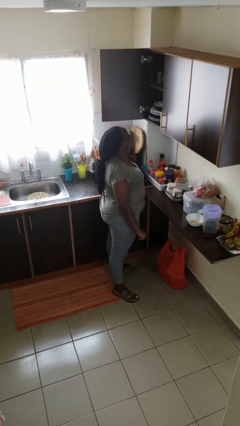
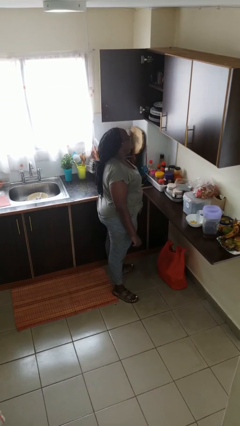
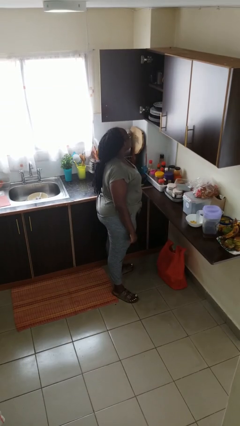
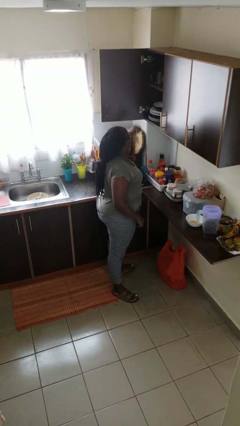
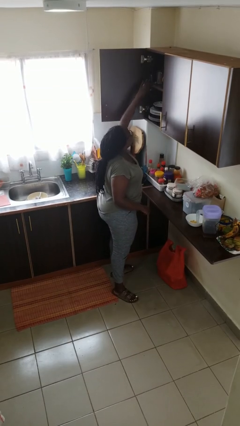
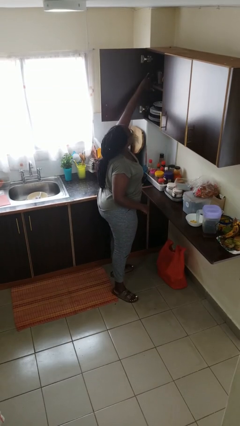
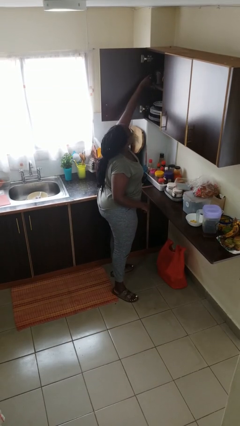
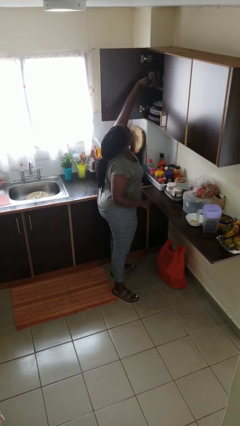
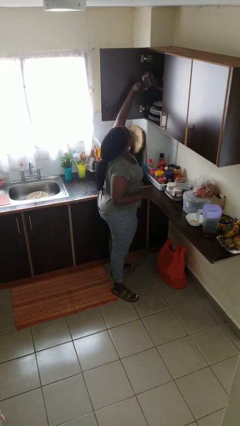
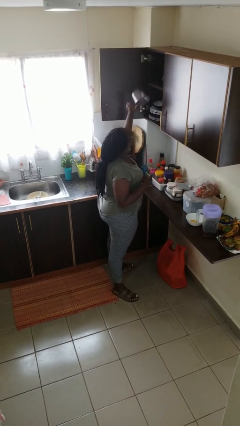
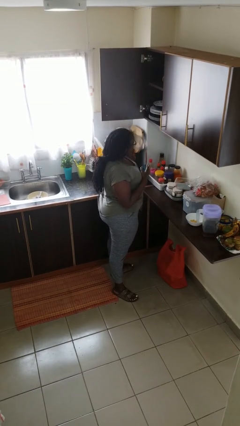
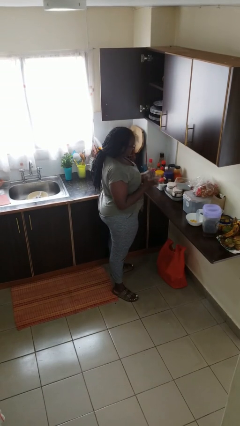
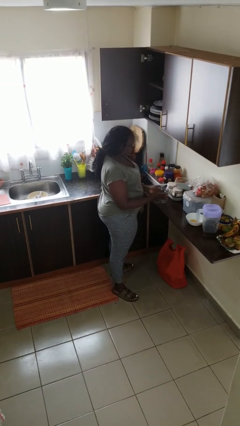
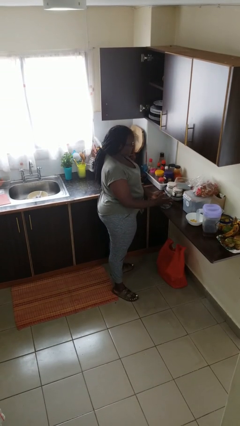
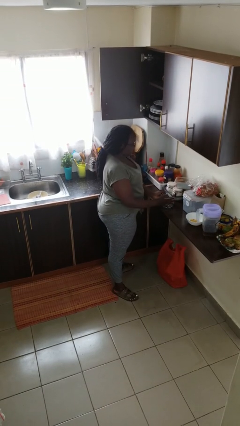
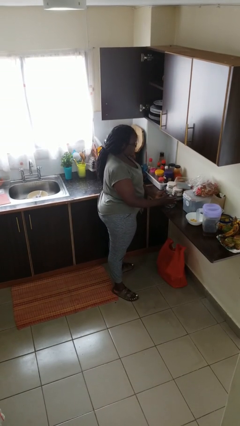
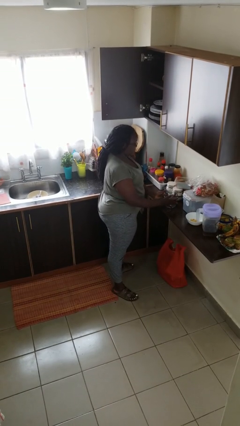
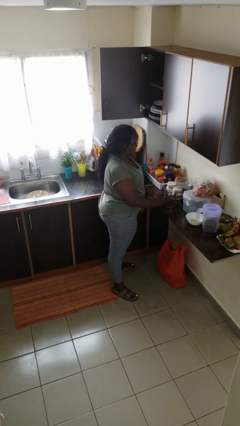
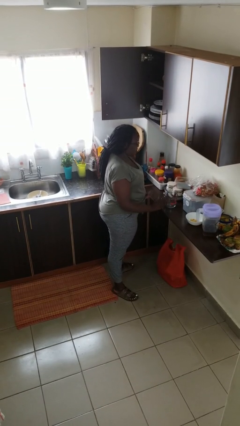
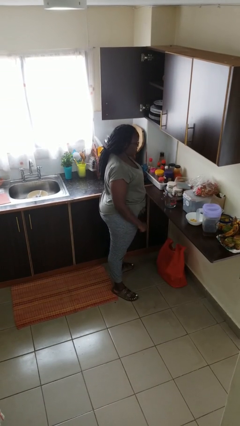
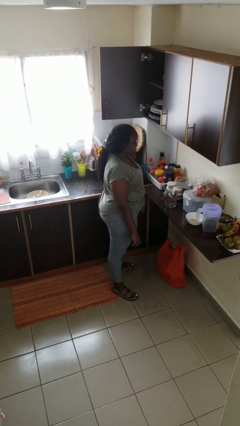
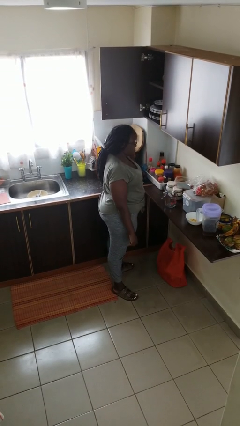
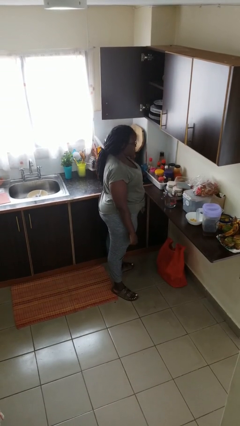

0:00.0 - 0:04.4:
person takes object from cabinet

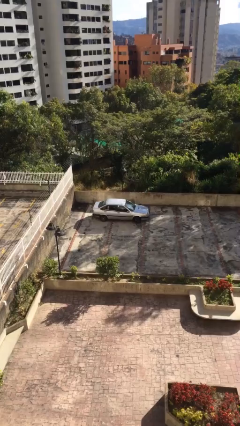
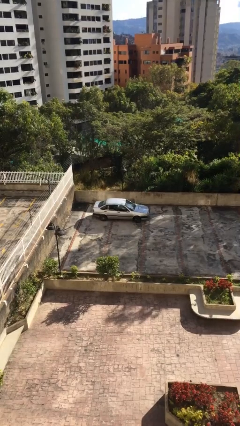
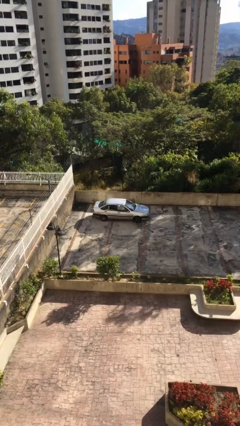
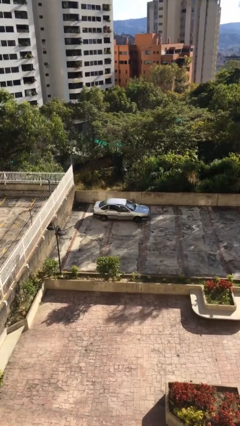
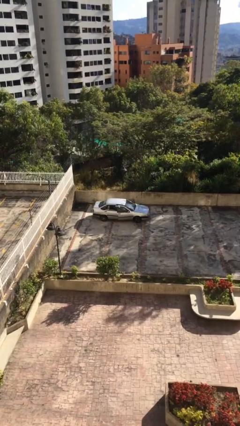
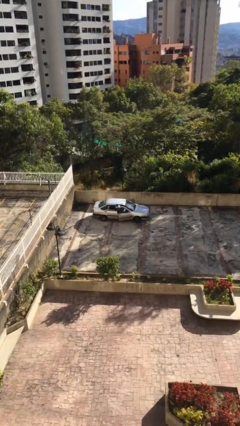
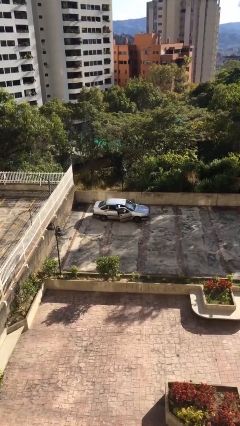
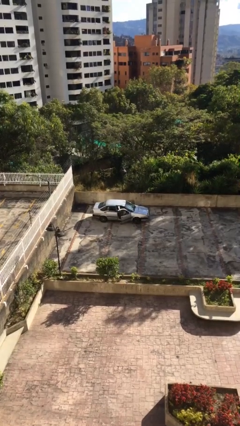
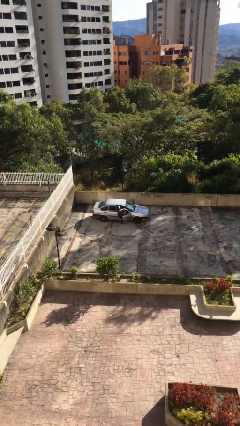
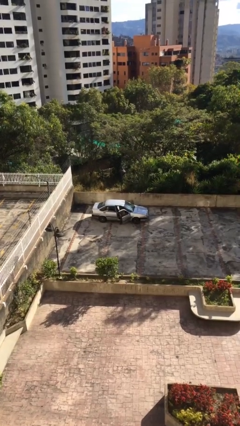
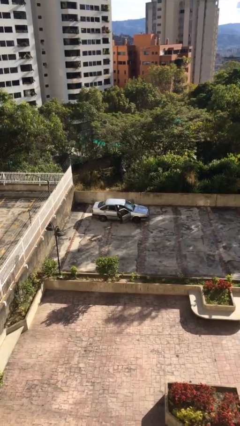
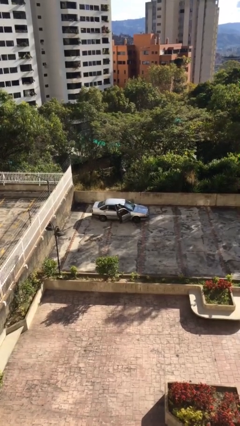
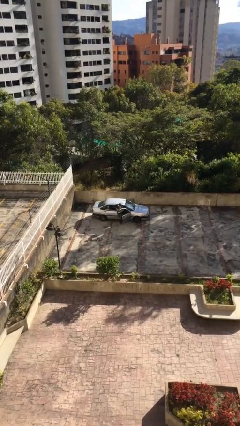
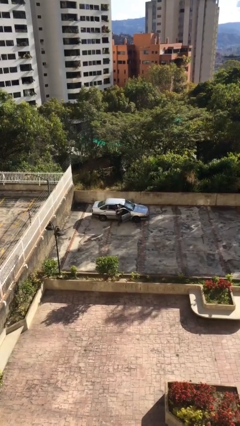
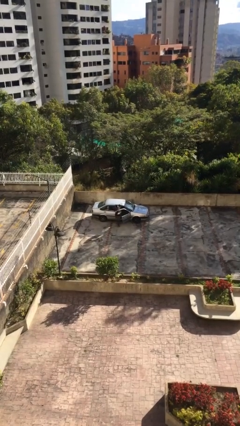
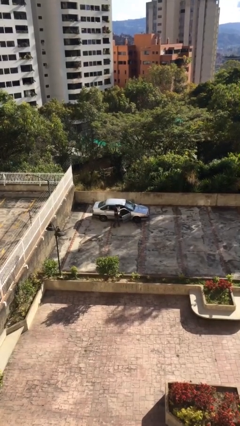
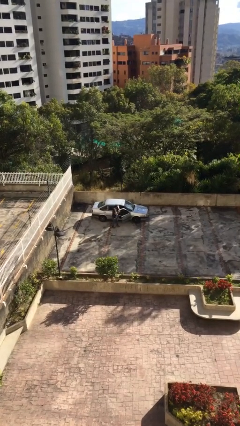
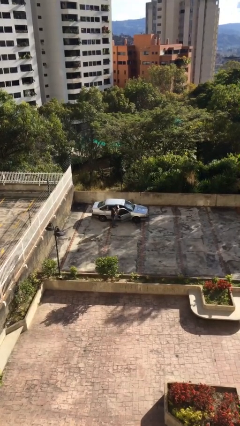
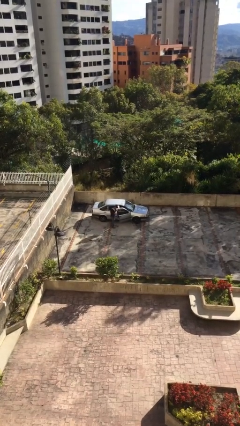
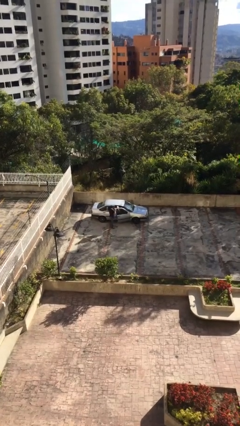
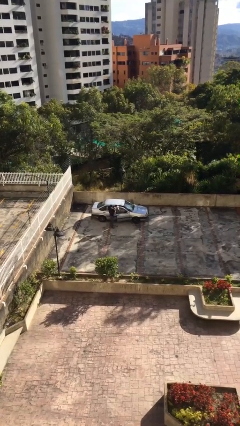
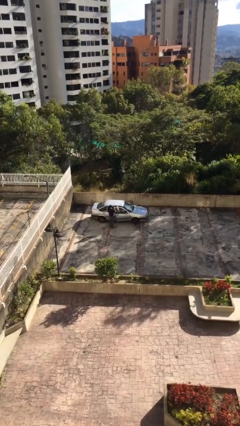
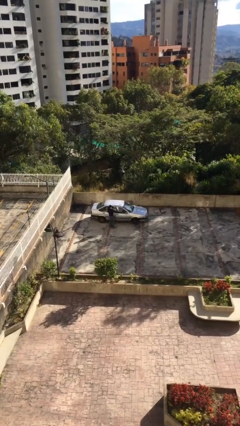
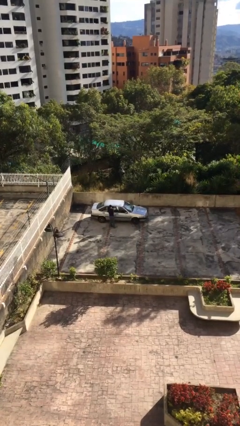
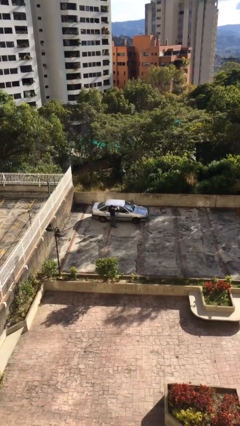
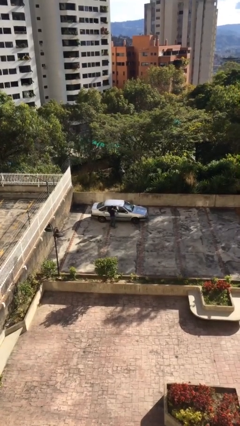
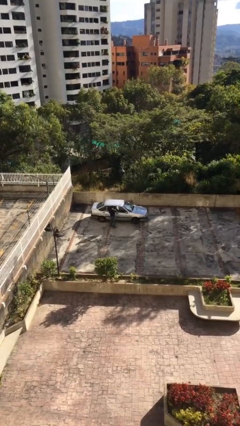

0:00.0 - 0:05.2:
car drops off person

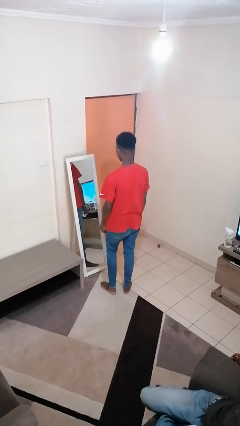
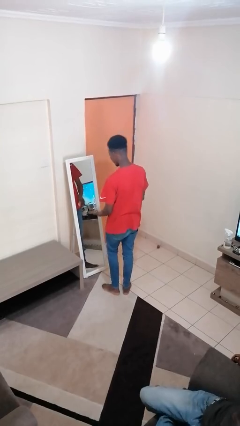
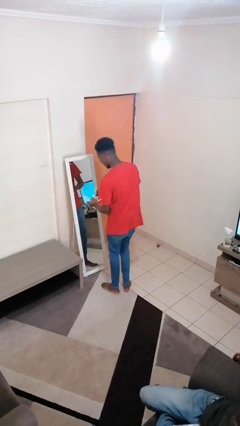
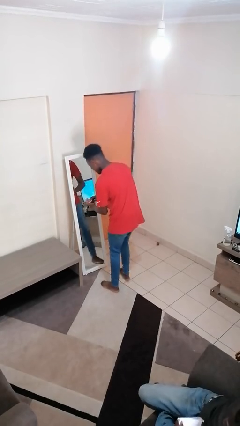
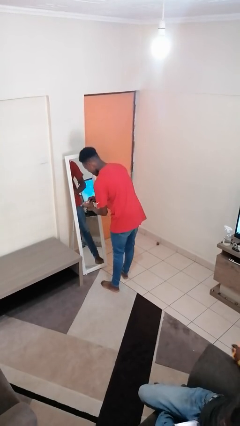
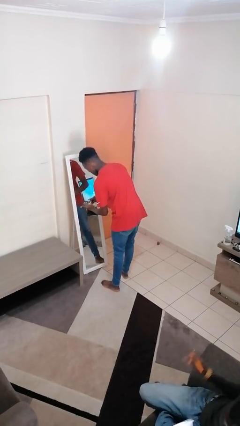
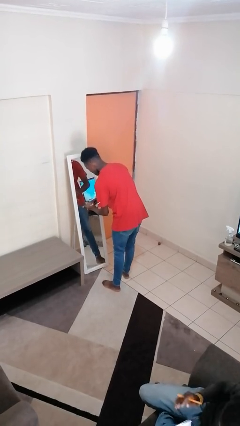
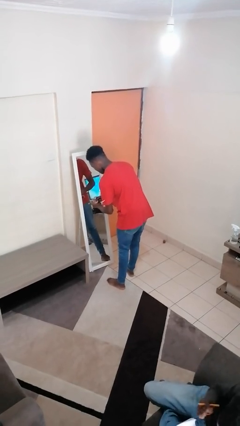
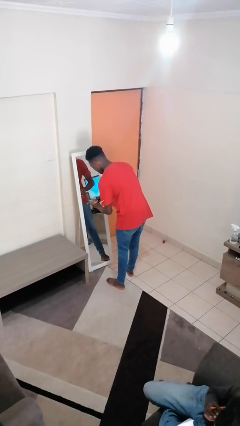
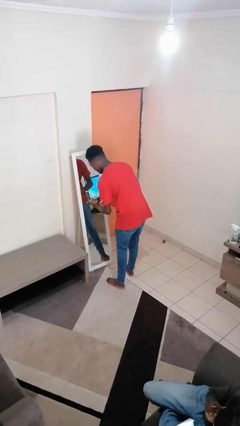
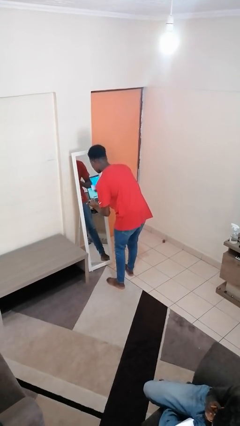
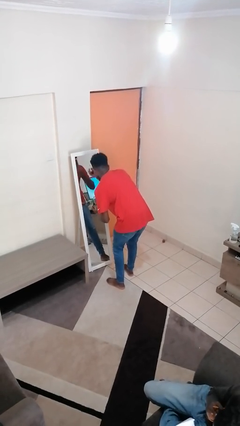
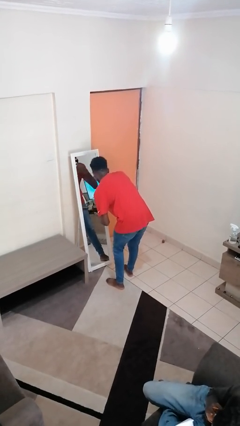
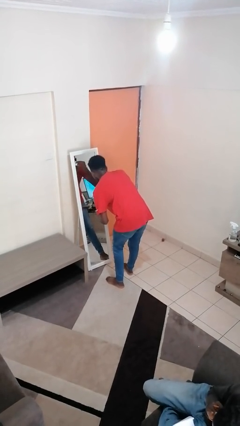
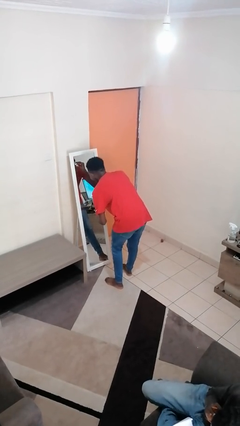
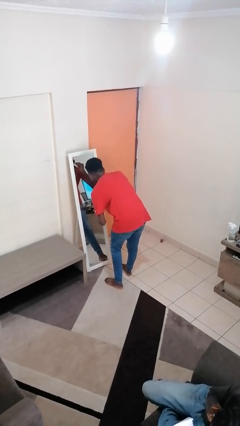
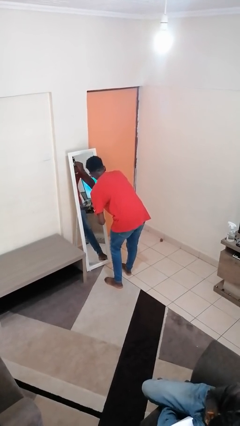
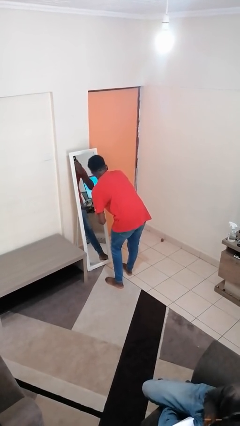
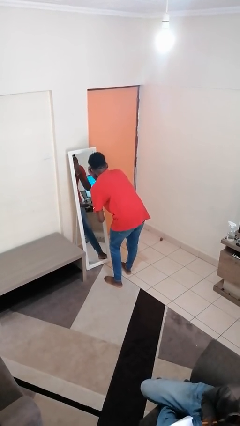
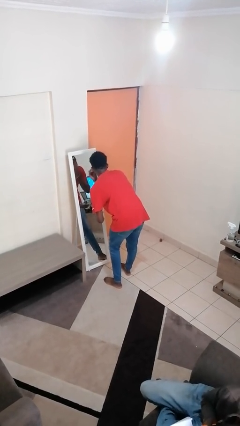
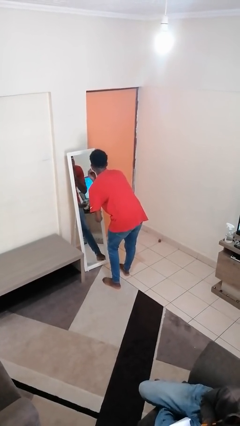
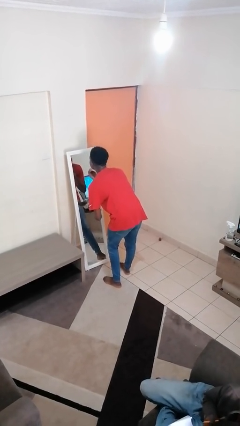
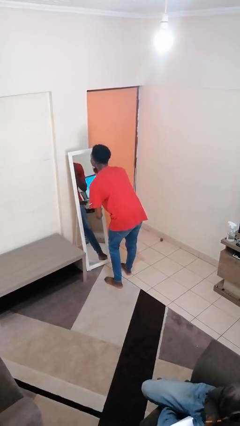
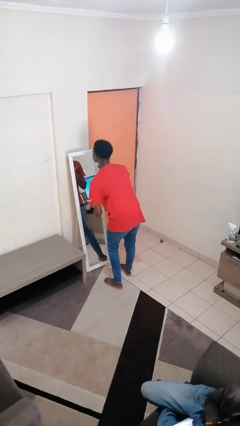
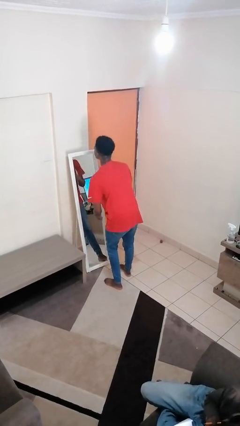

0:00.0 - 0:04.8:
person applies foundation makeup

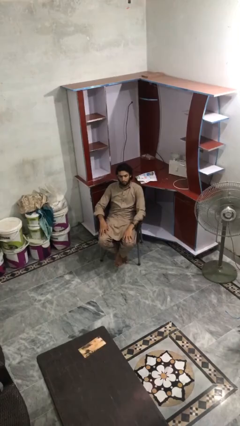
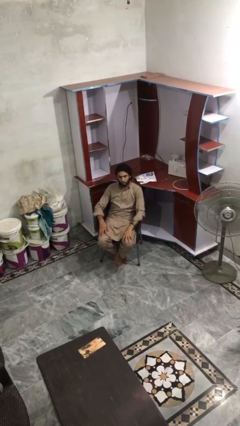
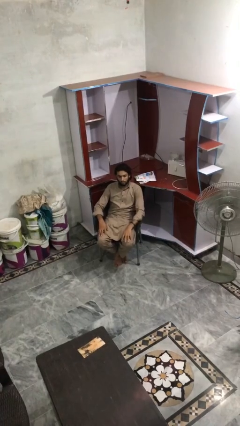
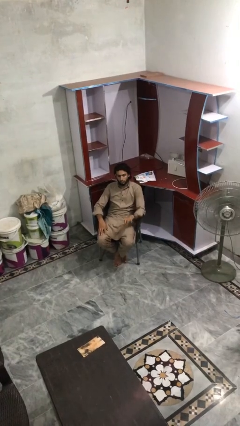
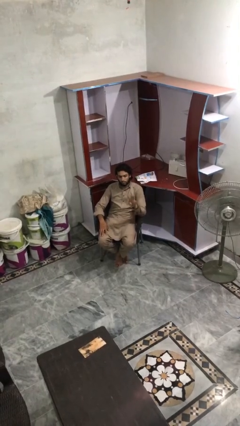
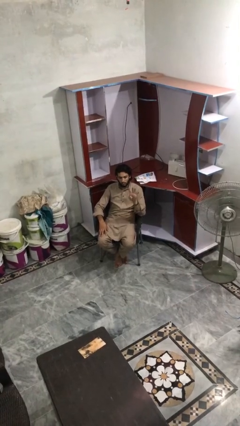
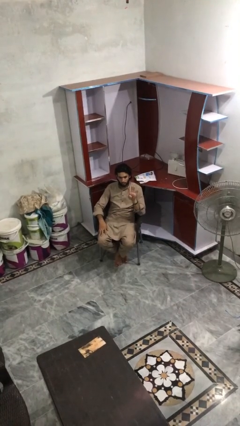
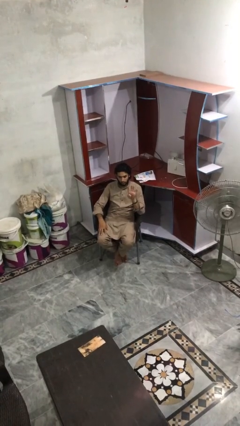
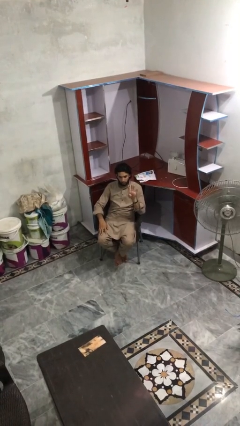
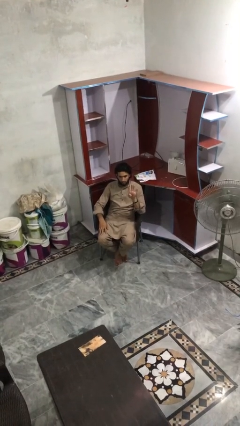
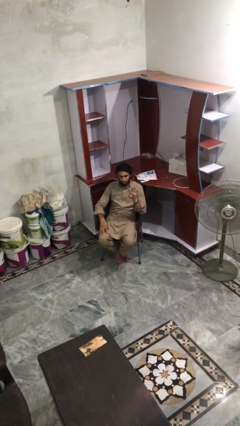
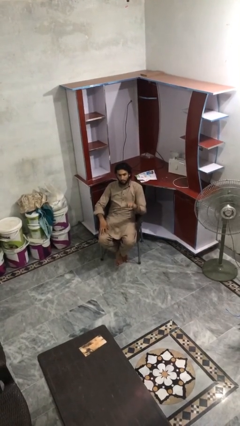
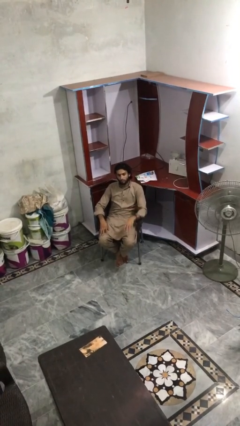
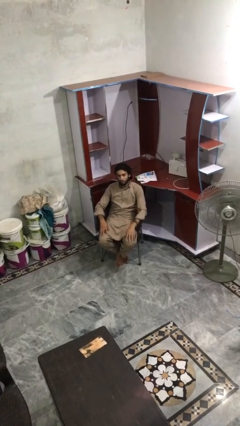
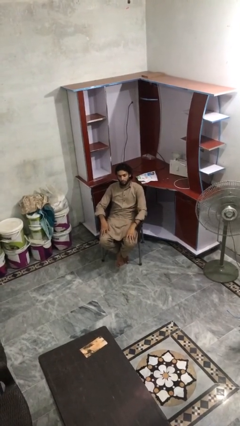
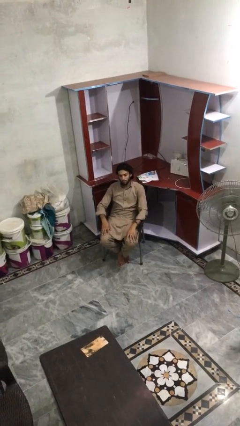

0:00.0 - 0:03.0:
person gestures number four

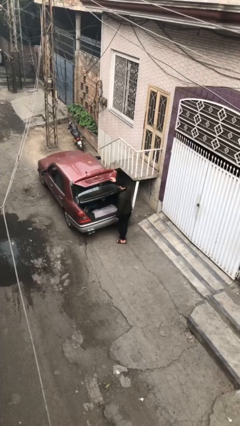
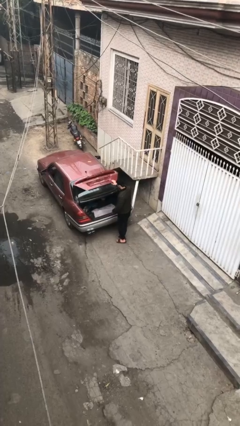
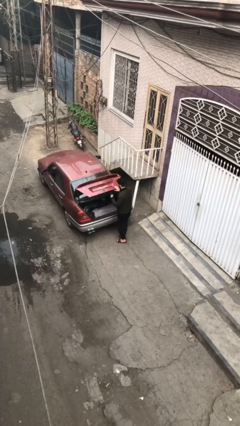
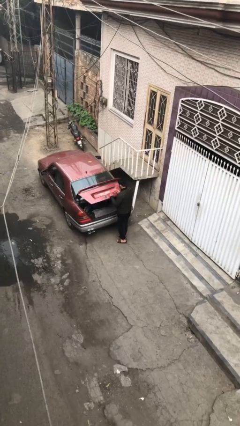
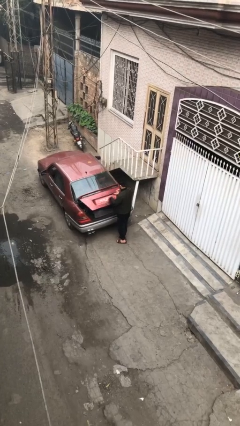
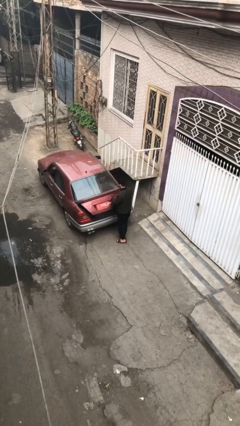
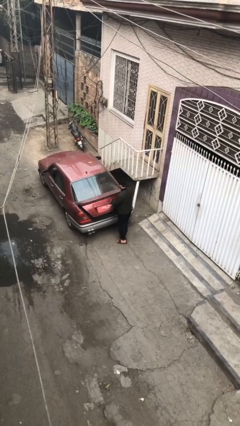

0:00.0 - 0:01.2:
person closes car trunk
